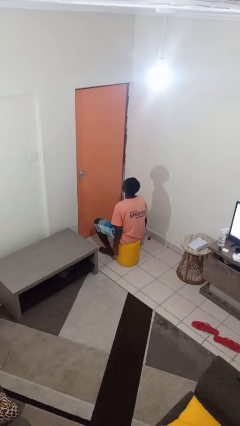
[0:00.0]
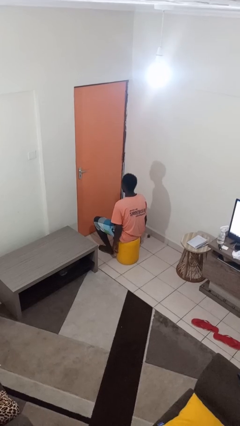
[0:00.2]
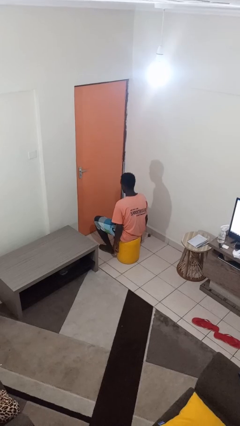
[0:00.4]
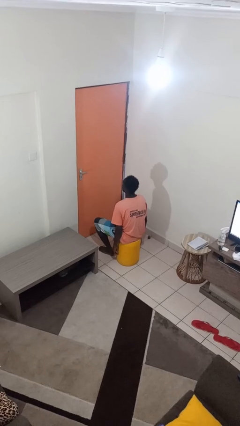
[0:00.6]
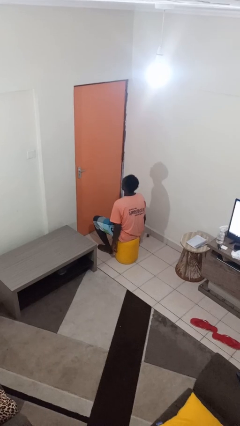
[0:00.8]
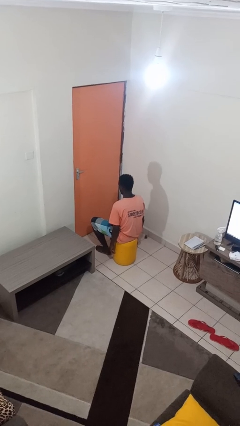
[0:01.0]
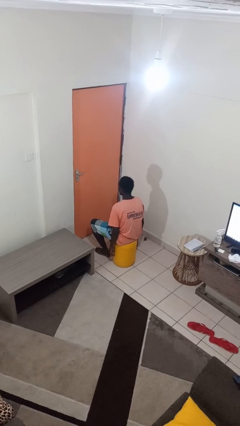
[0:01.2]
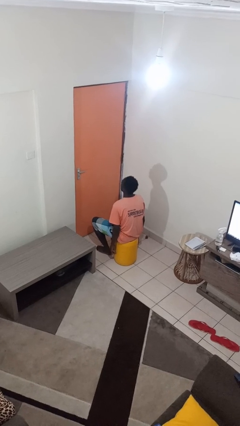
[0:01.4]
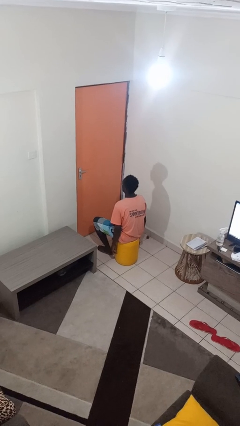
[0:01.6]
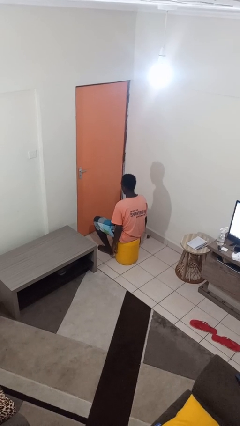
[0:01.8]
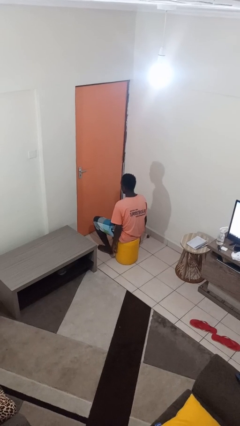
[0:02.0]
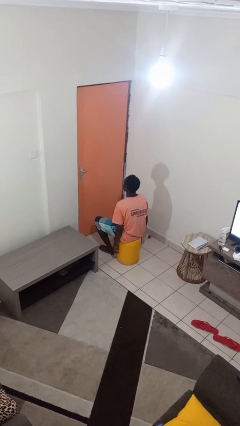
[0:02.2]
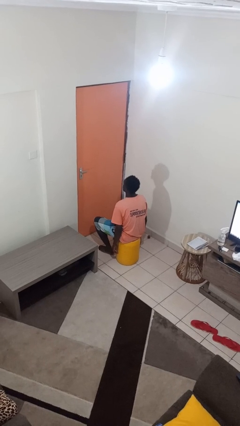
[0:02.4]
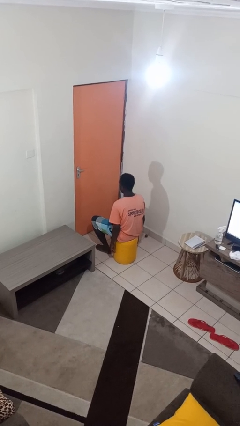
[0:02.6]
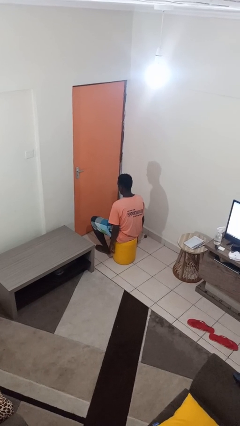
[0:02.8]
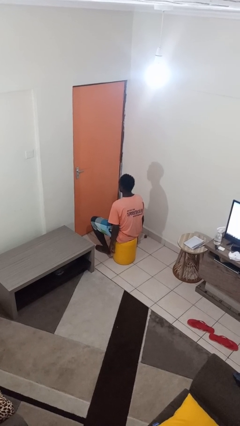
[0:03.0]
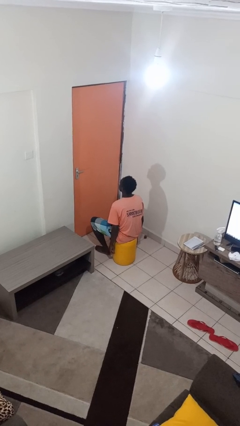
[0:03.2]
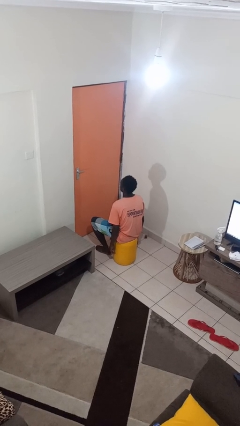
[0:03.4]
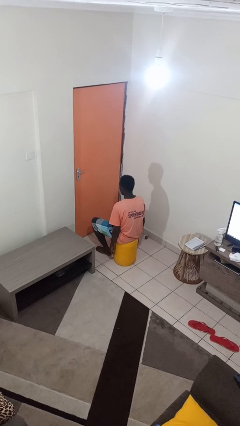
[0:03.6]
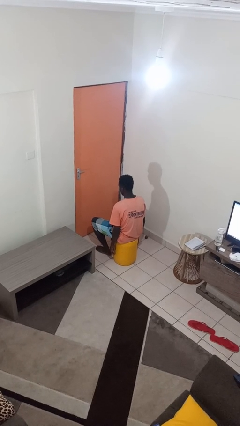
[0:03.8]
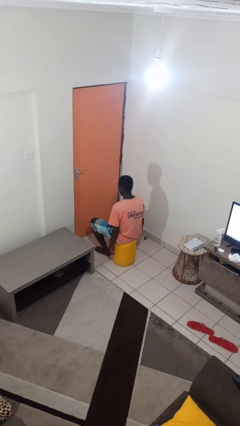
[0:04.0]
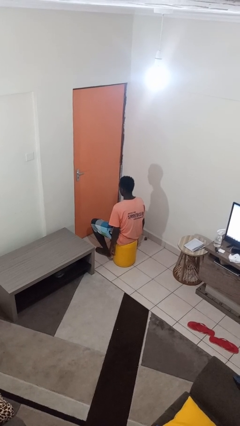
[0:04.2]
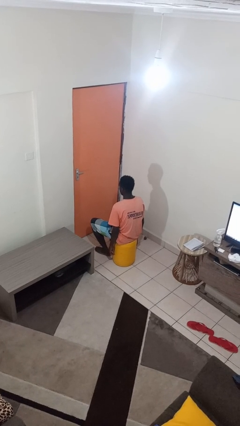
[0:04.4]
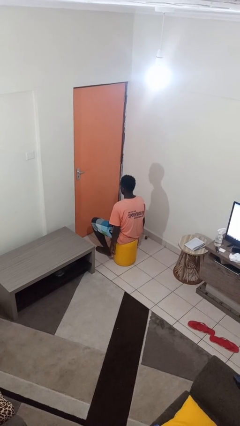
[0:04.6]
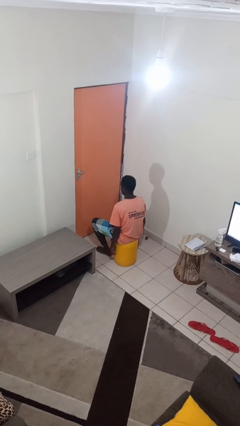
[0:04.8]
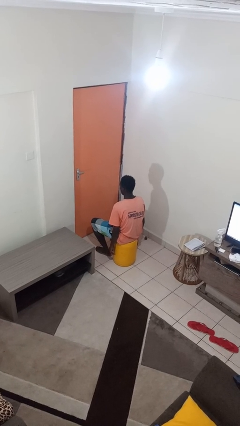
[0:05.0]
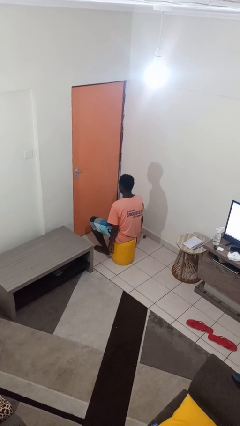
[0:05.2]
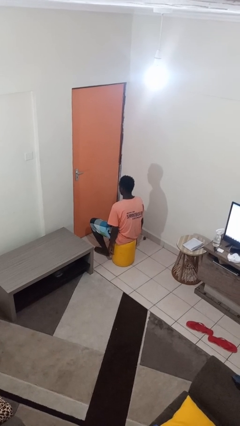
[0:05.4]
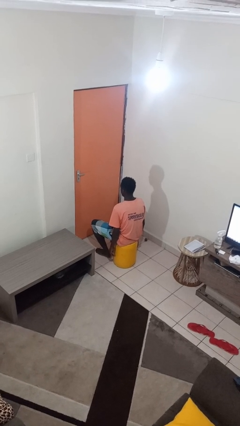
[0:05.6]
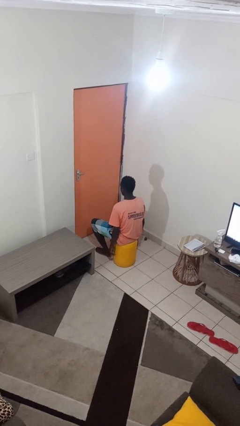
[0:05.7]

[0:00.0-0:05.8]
person nods head

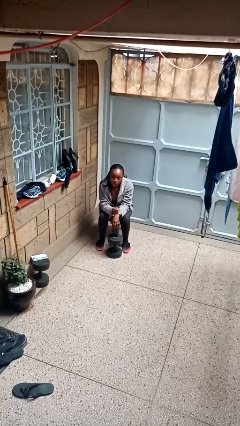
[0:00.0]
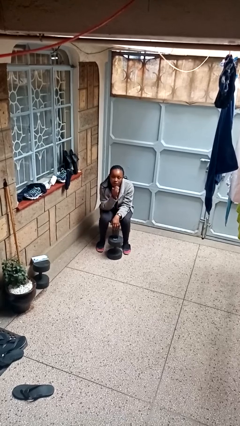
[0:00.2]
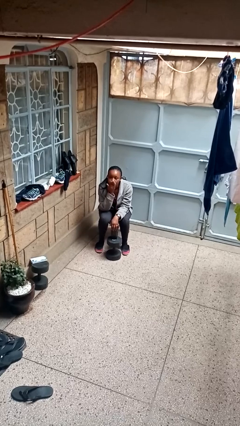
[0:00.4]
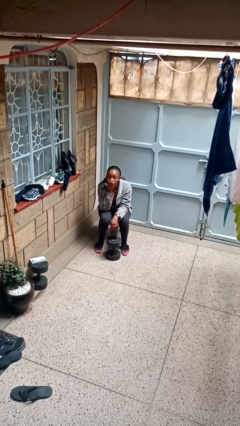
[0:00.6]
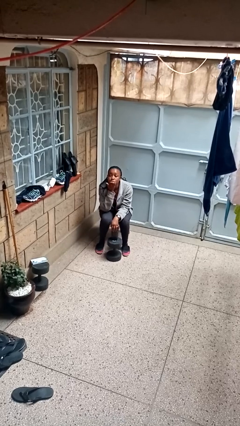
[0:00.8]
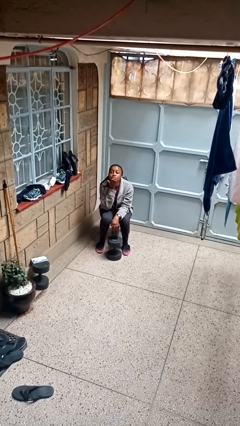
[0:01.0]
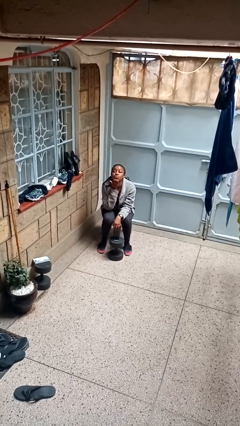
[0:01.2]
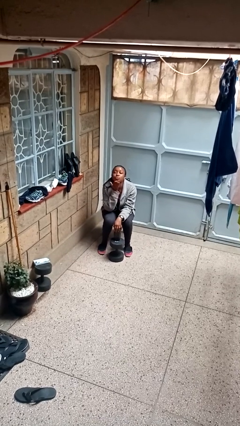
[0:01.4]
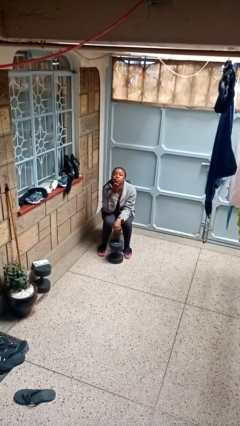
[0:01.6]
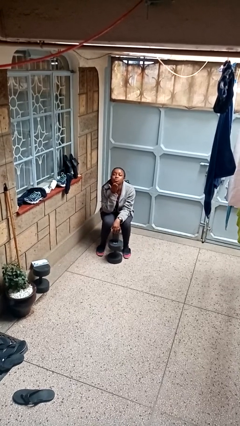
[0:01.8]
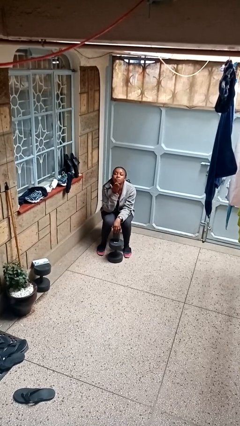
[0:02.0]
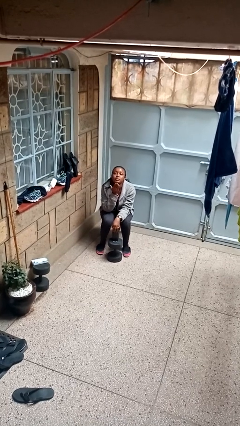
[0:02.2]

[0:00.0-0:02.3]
person gestures blow kiss

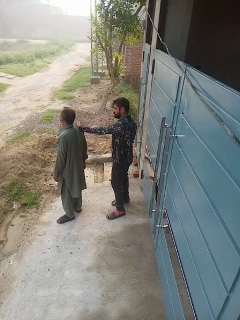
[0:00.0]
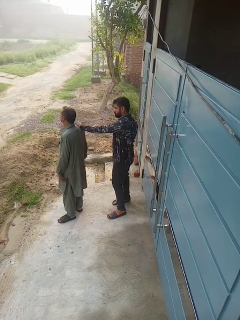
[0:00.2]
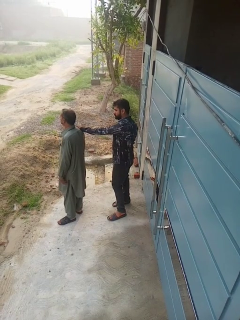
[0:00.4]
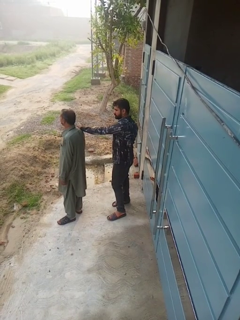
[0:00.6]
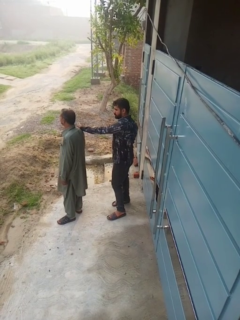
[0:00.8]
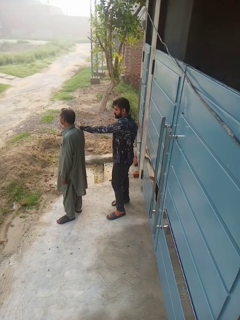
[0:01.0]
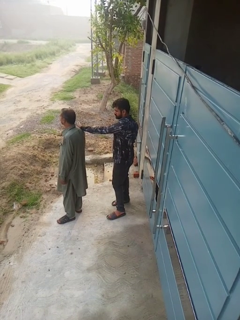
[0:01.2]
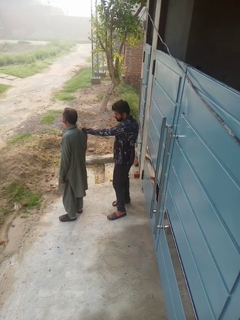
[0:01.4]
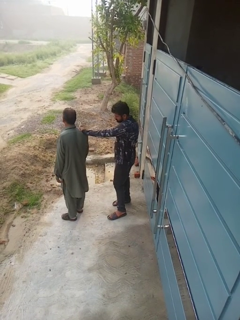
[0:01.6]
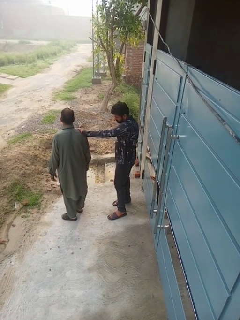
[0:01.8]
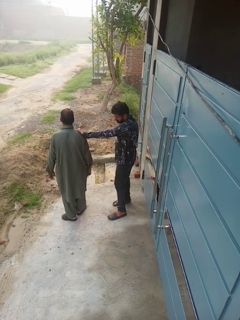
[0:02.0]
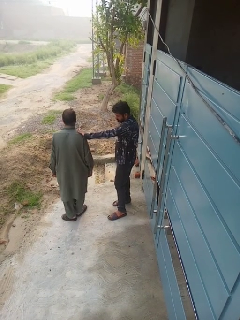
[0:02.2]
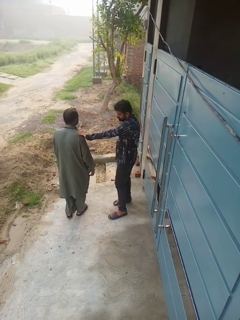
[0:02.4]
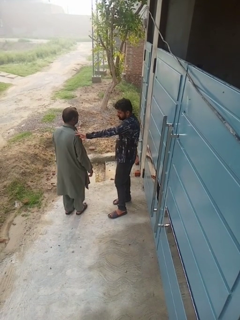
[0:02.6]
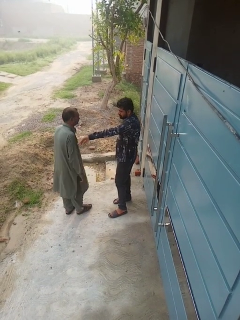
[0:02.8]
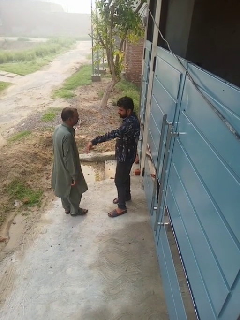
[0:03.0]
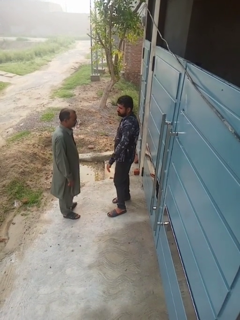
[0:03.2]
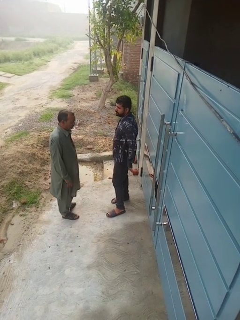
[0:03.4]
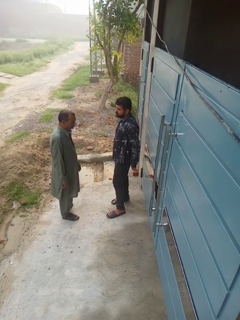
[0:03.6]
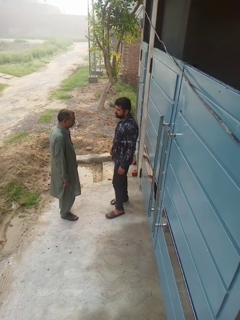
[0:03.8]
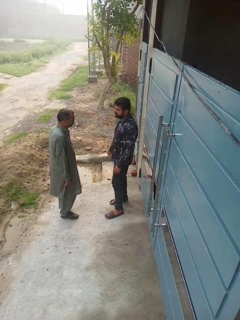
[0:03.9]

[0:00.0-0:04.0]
person spins person around

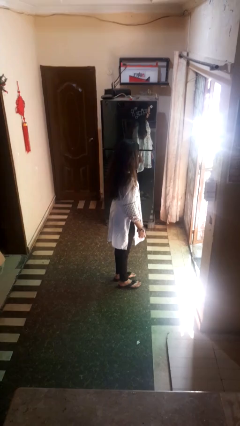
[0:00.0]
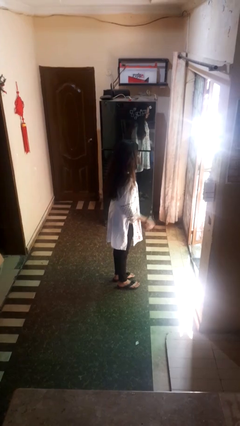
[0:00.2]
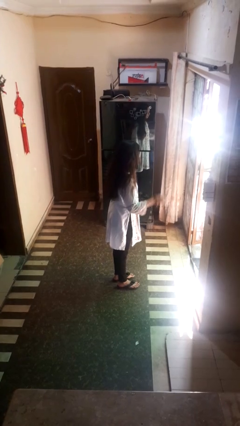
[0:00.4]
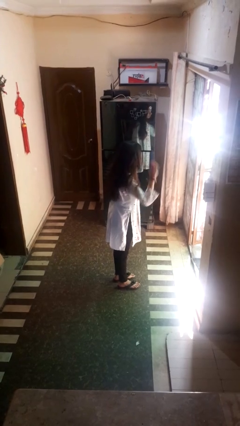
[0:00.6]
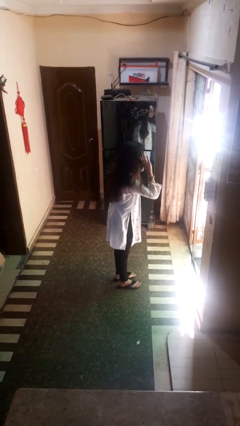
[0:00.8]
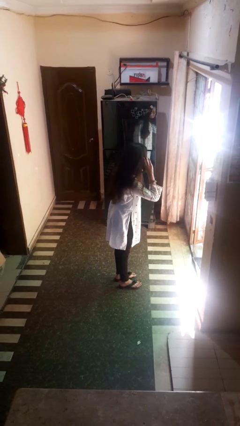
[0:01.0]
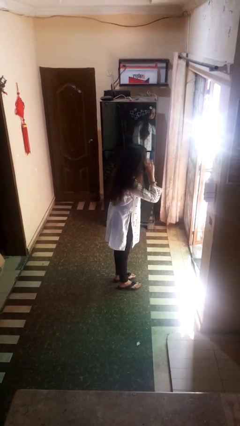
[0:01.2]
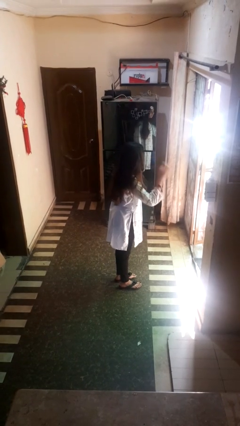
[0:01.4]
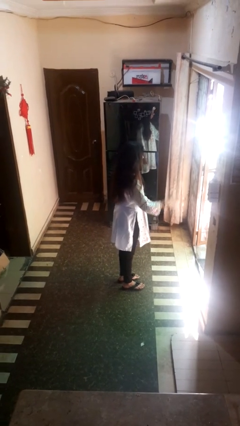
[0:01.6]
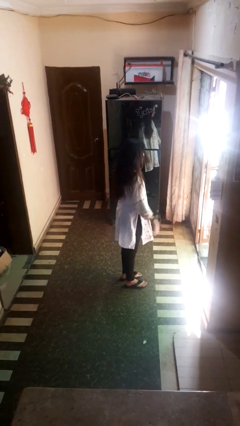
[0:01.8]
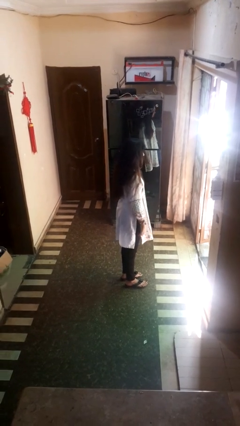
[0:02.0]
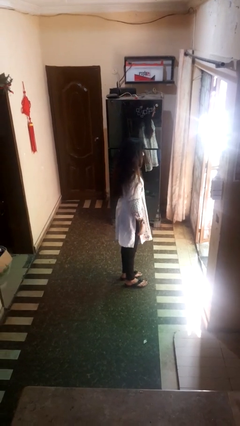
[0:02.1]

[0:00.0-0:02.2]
person gestures listen closely

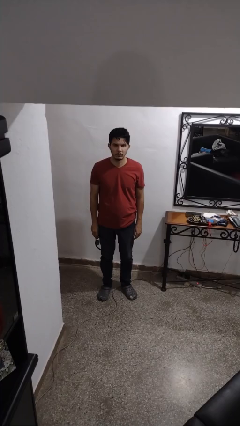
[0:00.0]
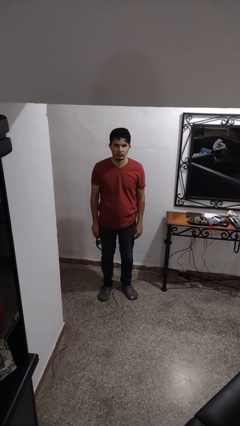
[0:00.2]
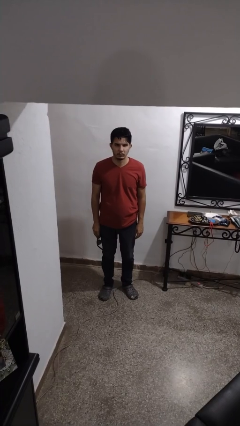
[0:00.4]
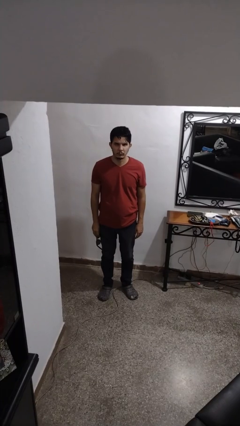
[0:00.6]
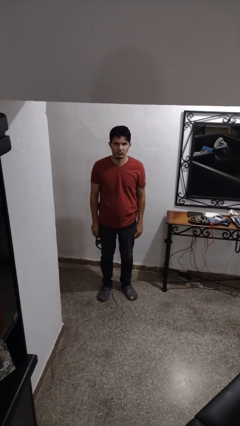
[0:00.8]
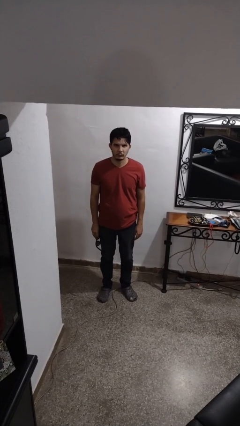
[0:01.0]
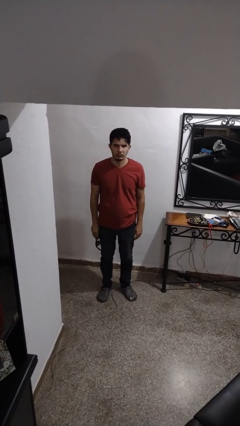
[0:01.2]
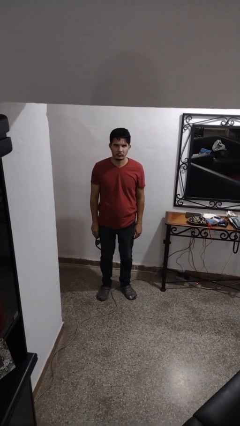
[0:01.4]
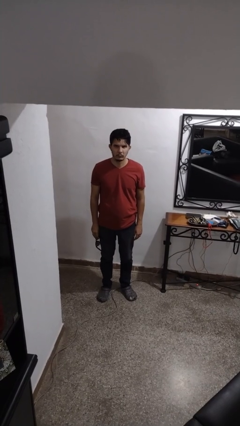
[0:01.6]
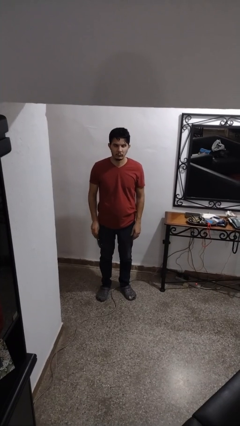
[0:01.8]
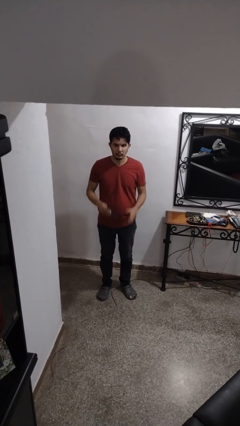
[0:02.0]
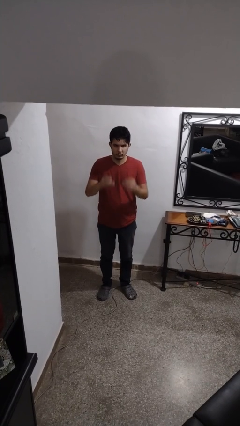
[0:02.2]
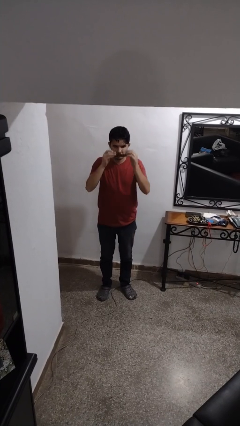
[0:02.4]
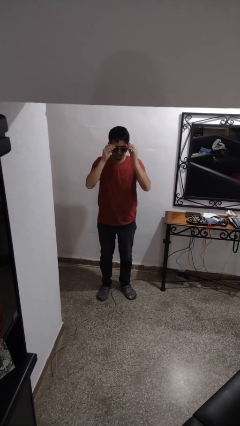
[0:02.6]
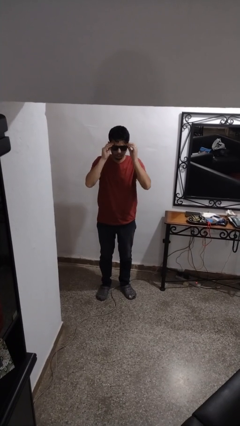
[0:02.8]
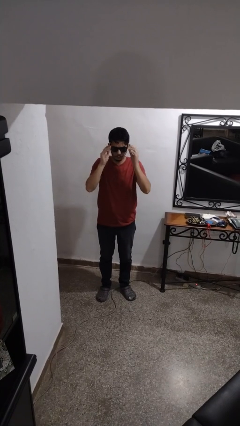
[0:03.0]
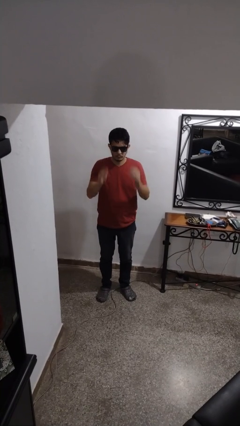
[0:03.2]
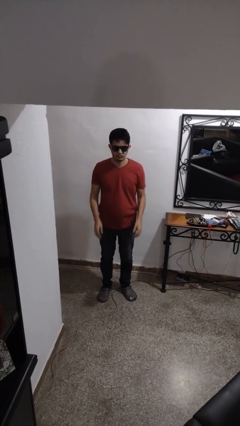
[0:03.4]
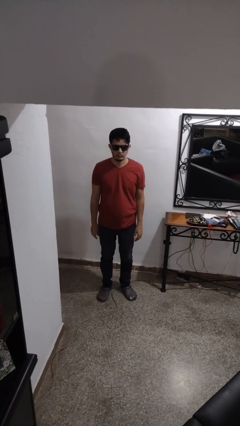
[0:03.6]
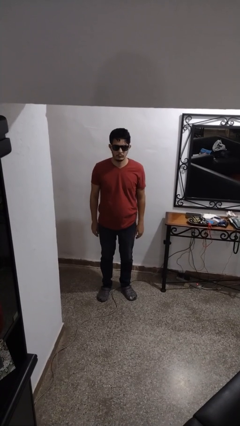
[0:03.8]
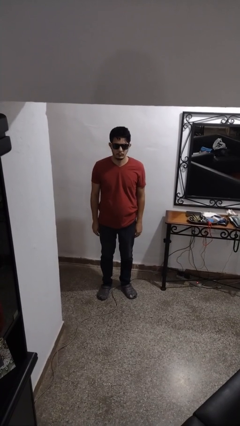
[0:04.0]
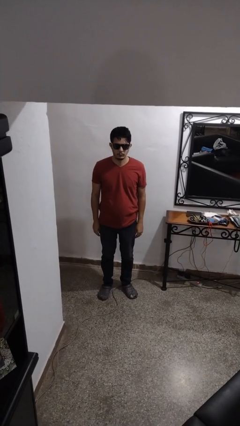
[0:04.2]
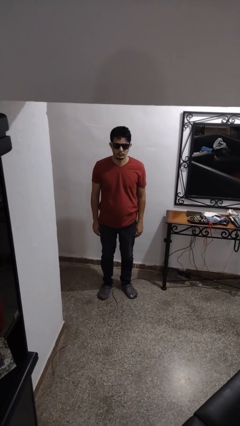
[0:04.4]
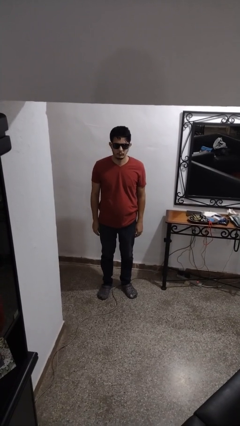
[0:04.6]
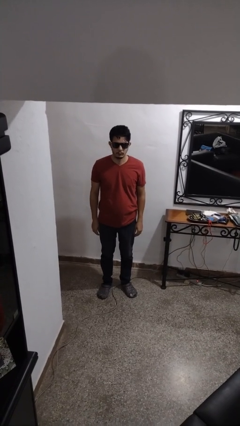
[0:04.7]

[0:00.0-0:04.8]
person puts on sunglasses
